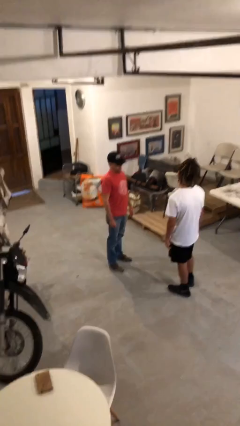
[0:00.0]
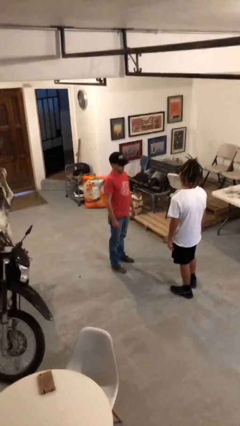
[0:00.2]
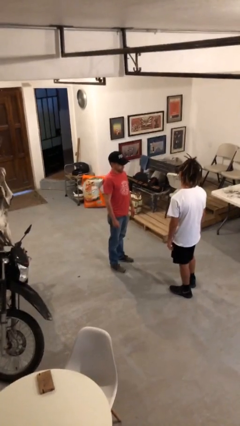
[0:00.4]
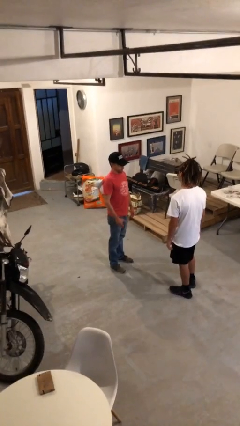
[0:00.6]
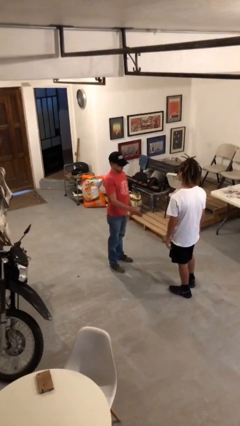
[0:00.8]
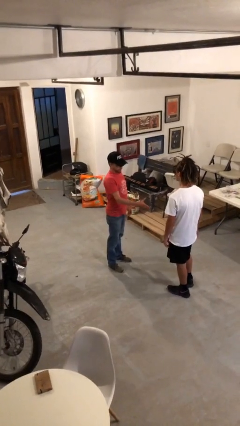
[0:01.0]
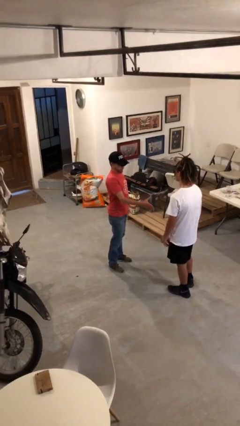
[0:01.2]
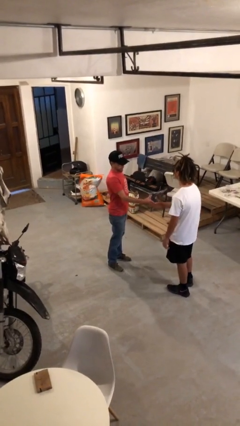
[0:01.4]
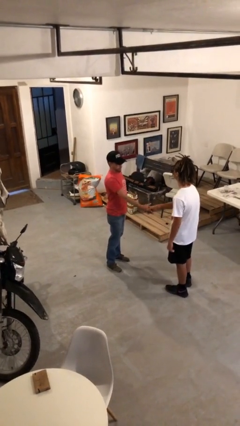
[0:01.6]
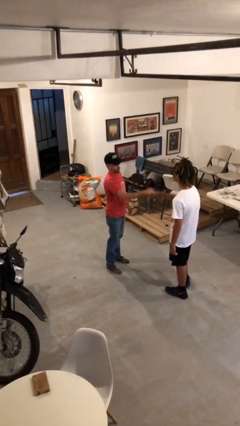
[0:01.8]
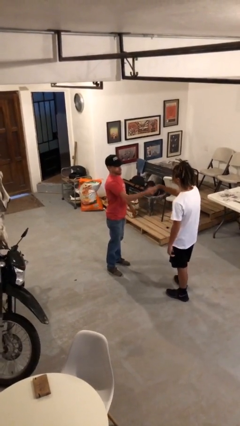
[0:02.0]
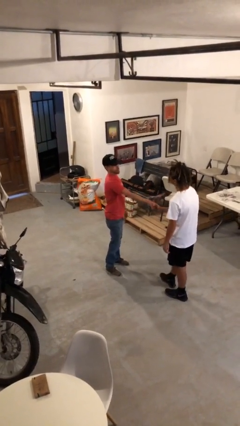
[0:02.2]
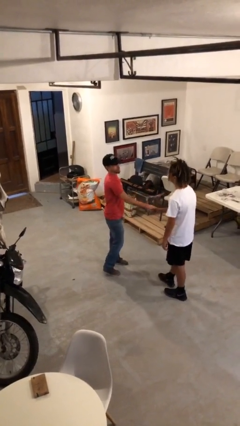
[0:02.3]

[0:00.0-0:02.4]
person shakes hand

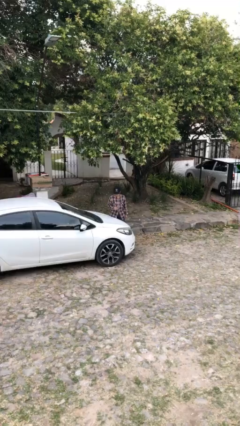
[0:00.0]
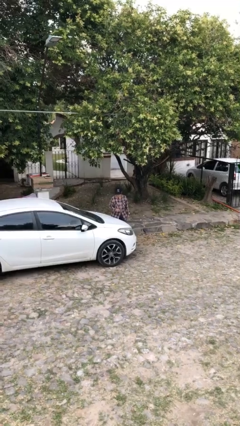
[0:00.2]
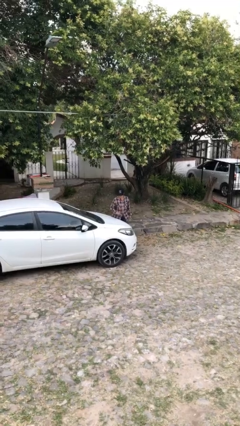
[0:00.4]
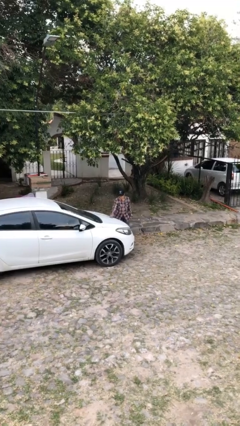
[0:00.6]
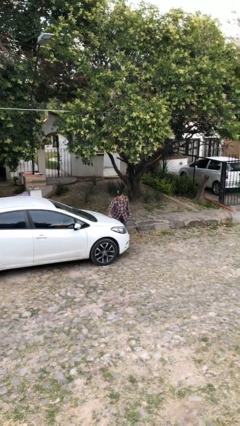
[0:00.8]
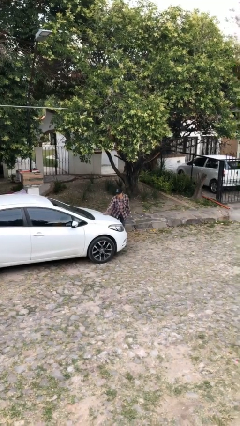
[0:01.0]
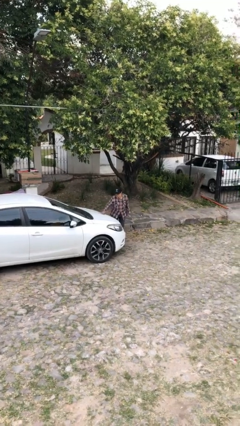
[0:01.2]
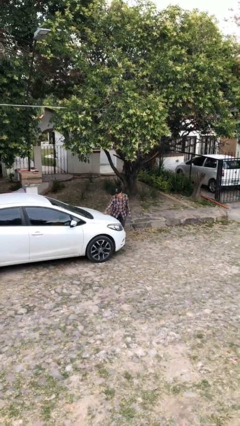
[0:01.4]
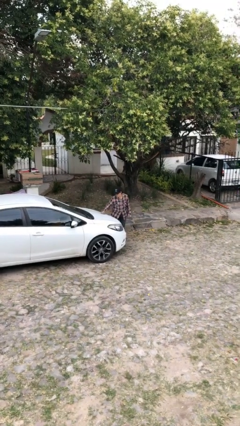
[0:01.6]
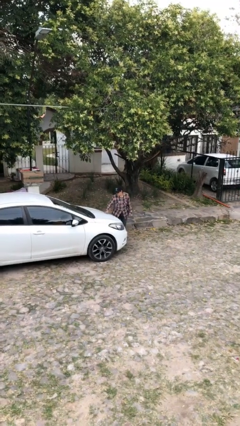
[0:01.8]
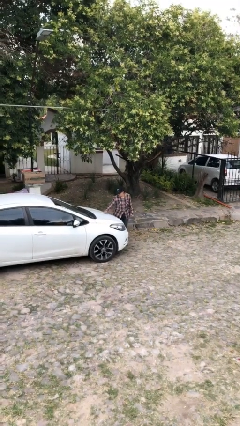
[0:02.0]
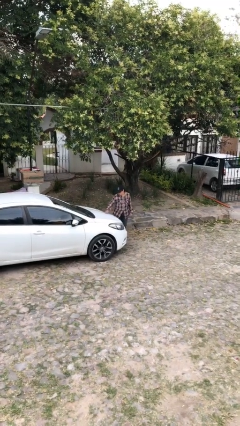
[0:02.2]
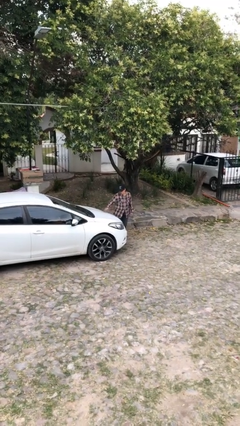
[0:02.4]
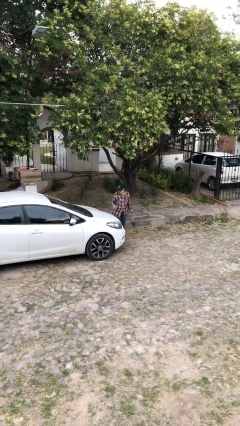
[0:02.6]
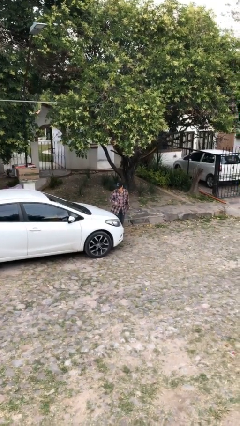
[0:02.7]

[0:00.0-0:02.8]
person polishes car with rag

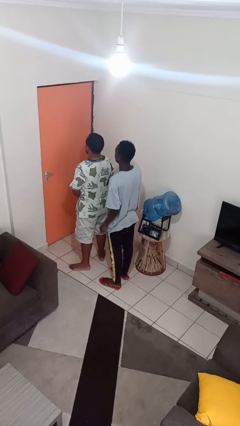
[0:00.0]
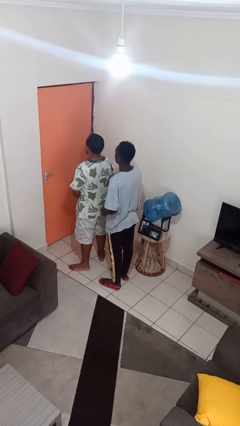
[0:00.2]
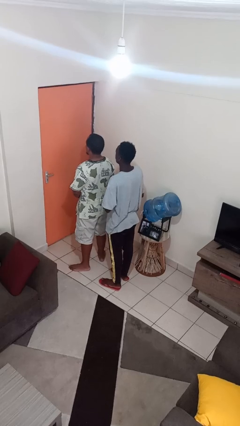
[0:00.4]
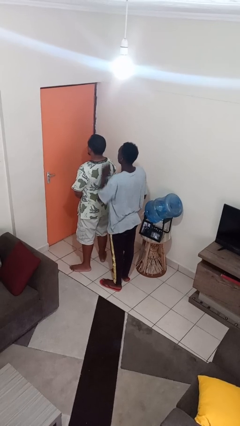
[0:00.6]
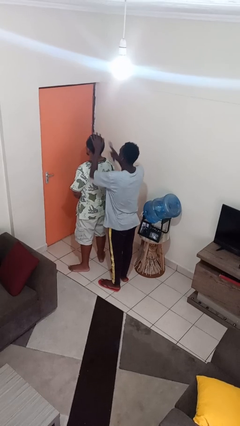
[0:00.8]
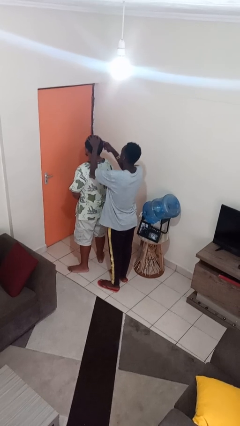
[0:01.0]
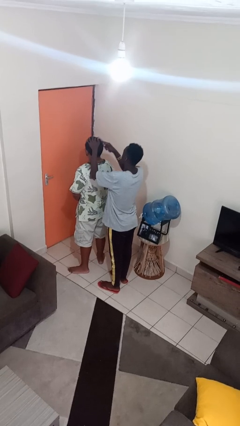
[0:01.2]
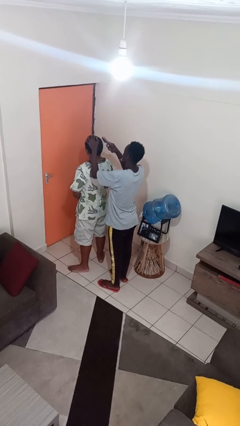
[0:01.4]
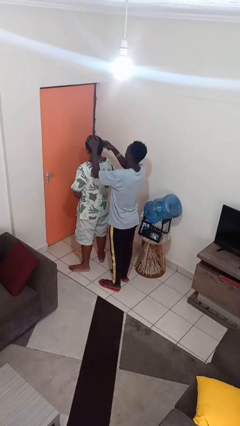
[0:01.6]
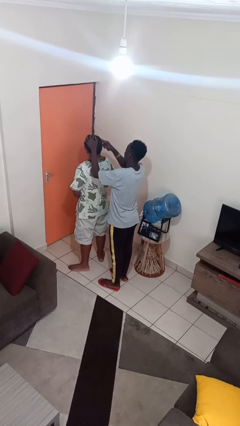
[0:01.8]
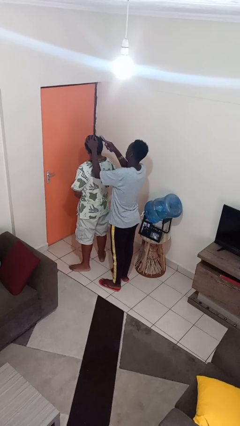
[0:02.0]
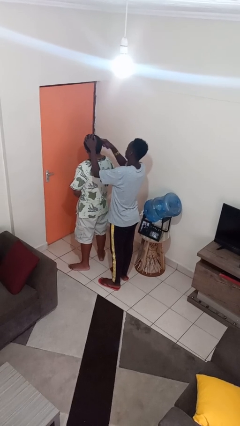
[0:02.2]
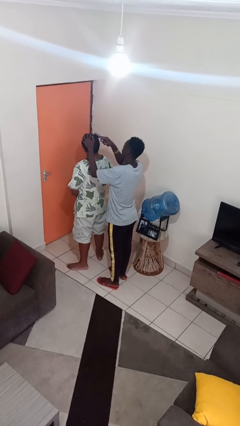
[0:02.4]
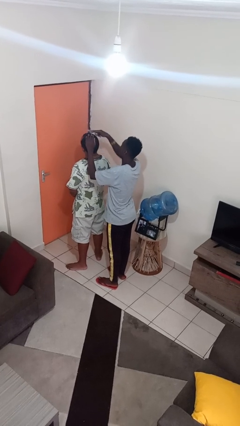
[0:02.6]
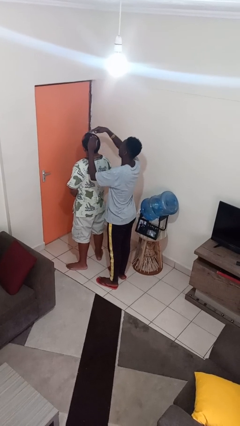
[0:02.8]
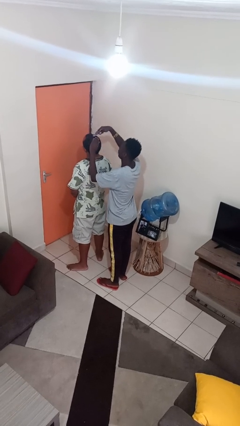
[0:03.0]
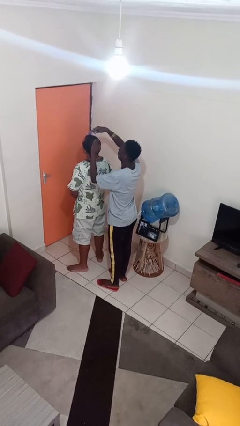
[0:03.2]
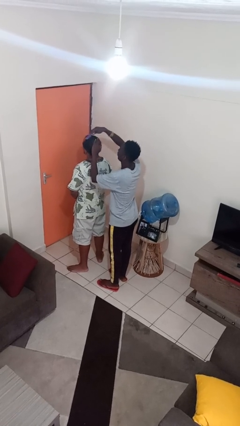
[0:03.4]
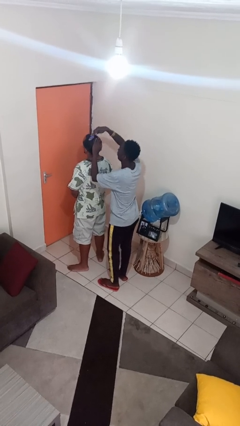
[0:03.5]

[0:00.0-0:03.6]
person brushes hair of person

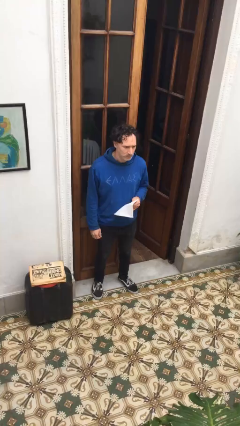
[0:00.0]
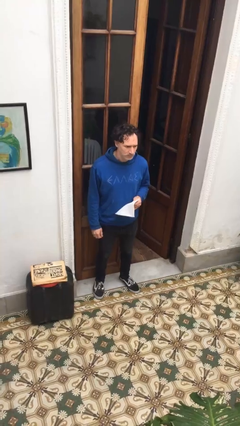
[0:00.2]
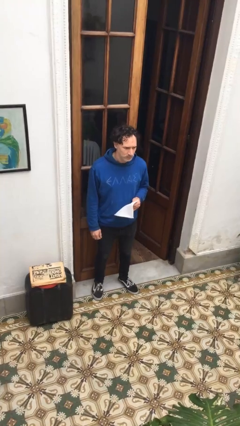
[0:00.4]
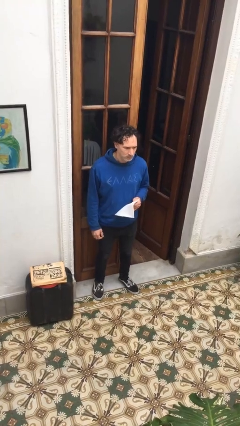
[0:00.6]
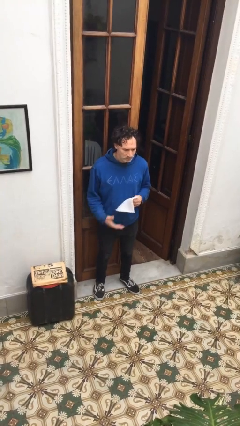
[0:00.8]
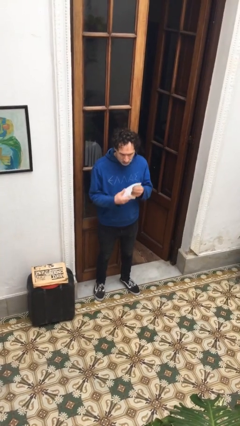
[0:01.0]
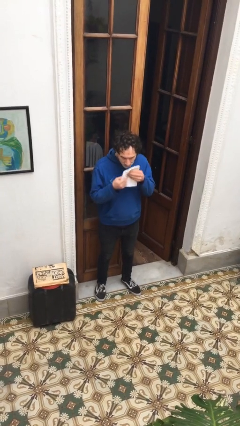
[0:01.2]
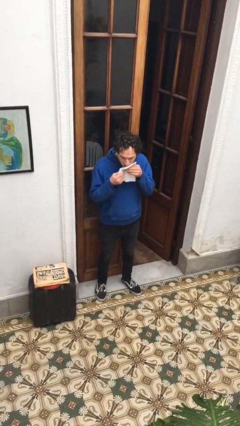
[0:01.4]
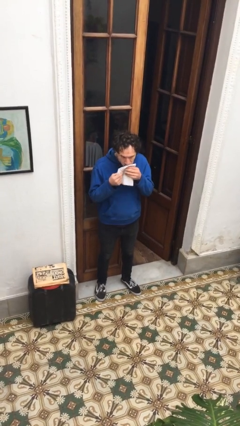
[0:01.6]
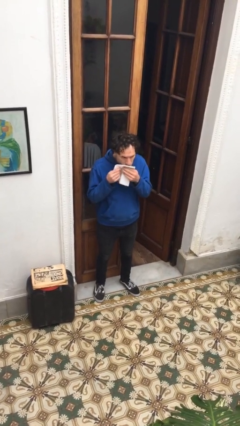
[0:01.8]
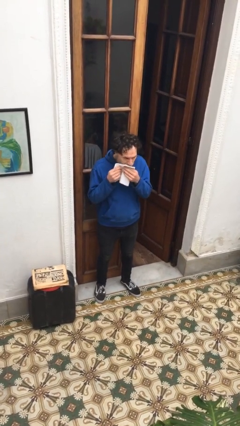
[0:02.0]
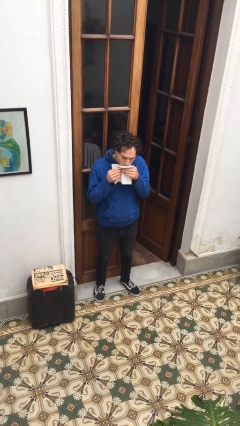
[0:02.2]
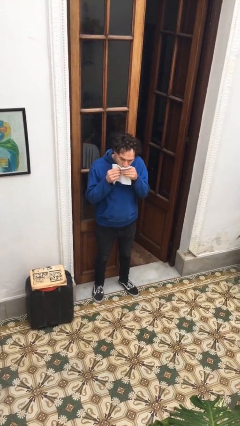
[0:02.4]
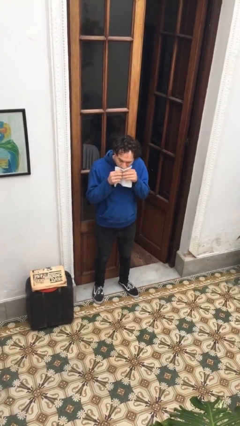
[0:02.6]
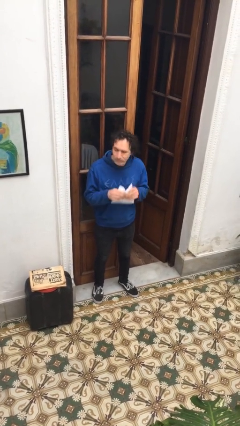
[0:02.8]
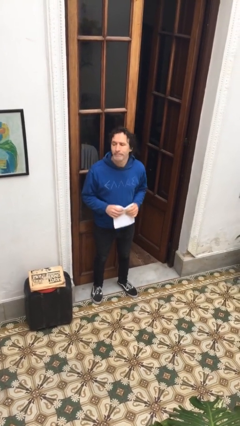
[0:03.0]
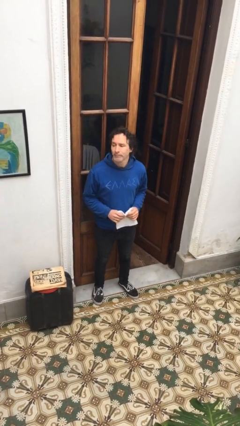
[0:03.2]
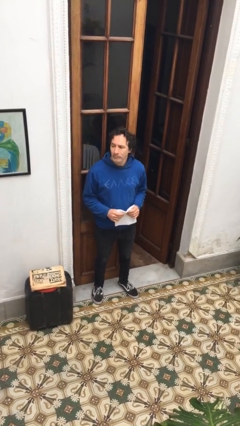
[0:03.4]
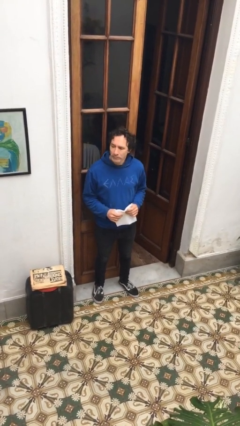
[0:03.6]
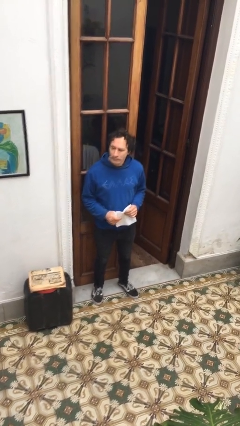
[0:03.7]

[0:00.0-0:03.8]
person wipes mouth with napkin

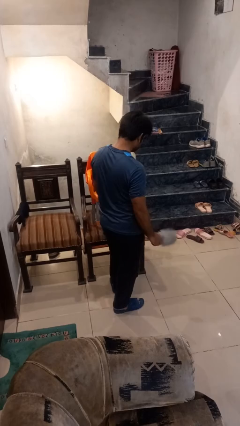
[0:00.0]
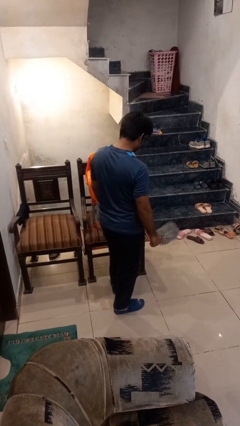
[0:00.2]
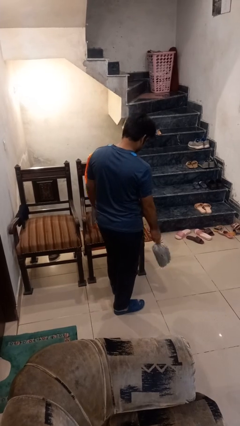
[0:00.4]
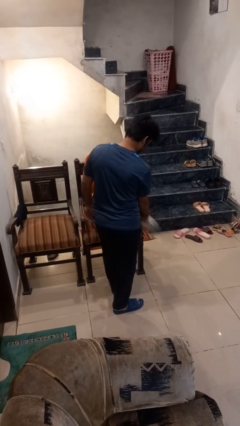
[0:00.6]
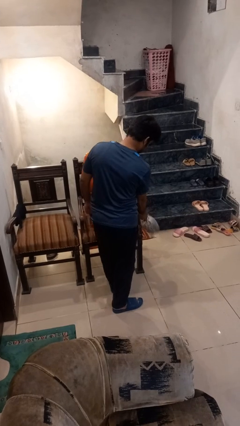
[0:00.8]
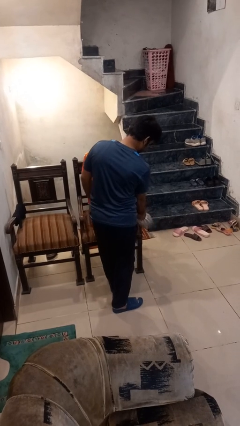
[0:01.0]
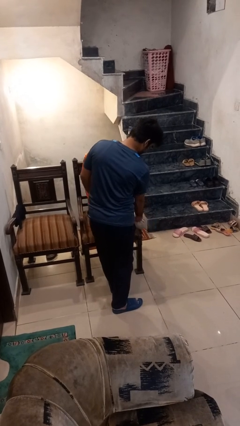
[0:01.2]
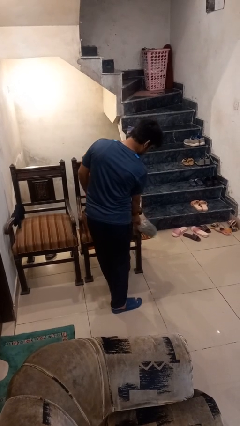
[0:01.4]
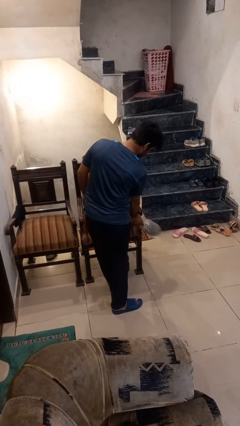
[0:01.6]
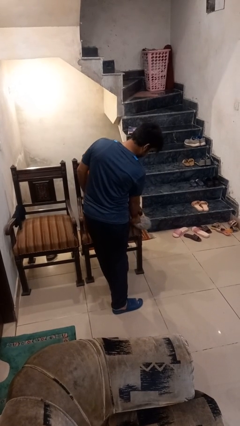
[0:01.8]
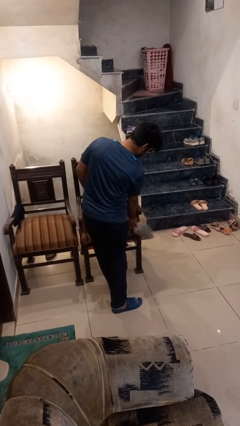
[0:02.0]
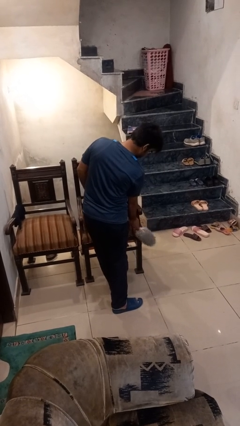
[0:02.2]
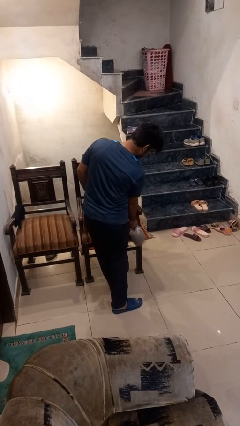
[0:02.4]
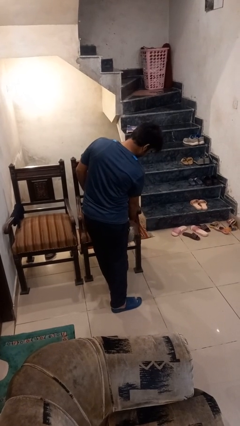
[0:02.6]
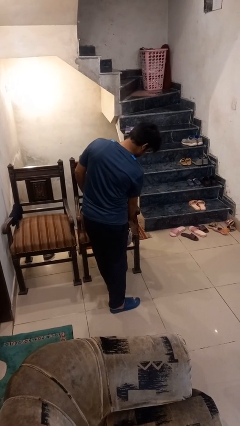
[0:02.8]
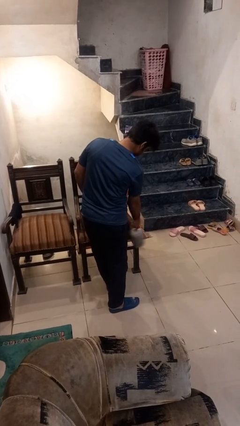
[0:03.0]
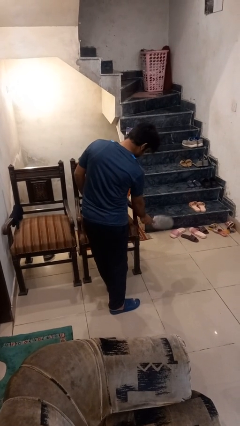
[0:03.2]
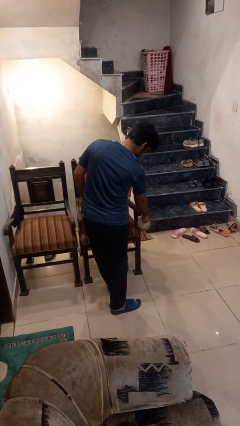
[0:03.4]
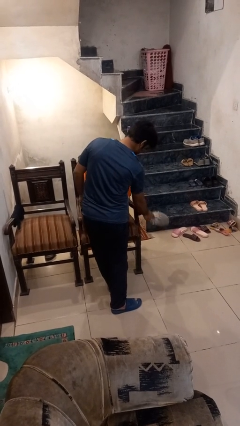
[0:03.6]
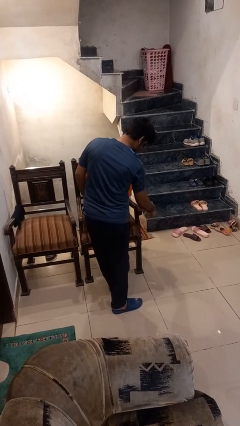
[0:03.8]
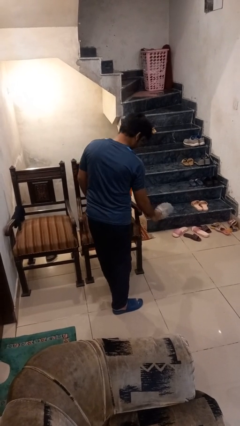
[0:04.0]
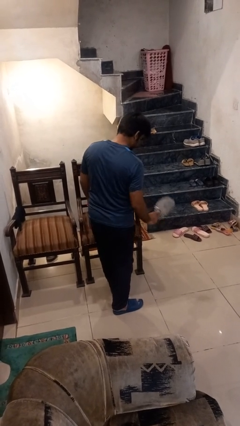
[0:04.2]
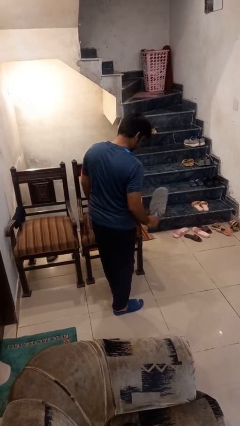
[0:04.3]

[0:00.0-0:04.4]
person dusts furniture
